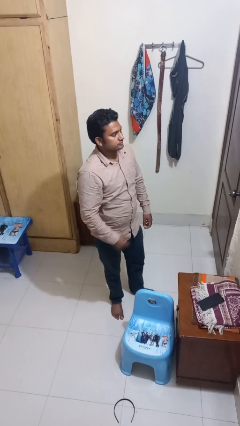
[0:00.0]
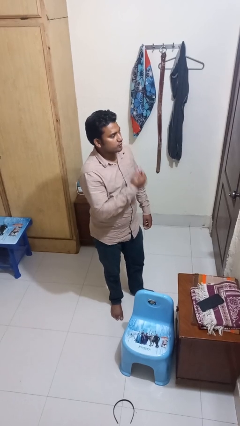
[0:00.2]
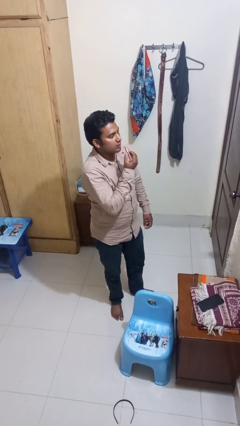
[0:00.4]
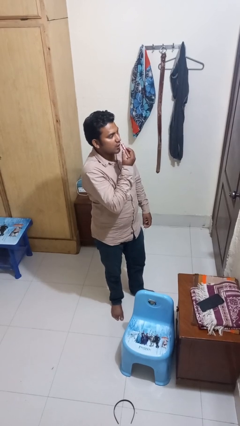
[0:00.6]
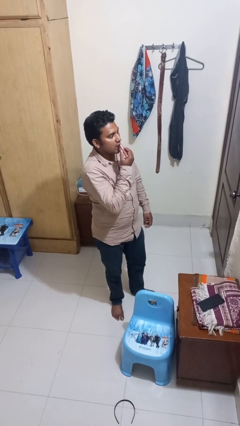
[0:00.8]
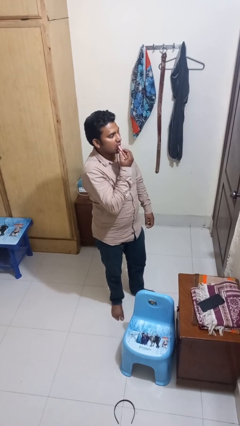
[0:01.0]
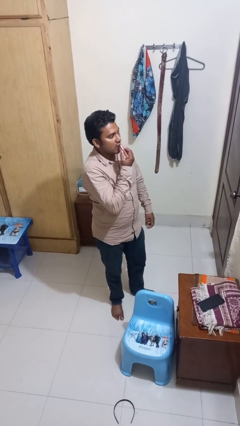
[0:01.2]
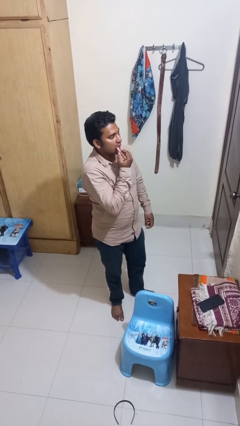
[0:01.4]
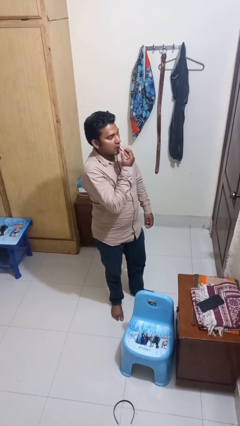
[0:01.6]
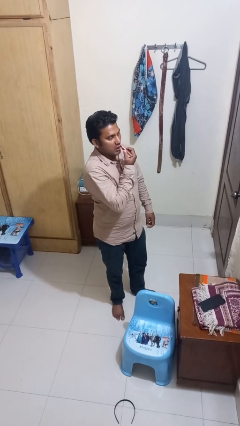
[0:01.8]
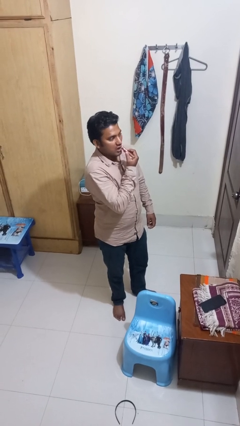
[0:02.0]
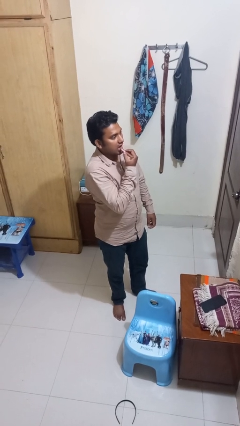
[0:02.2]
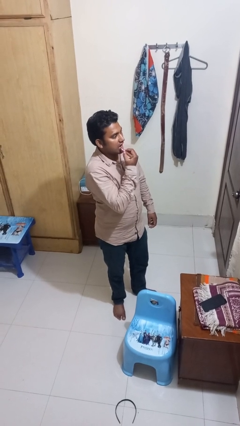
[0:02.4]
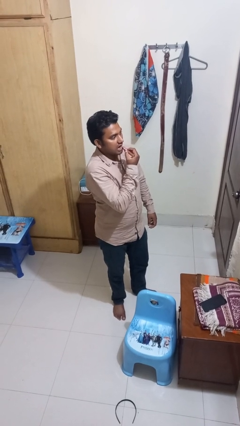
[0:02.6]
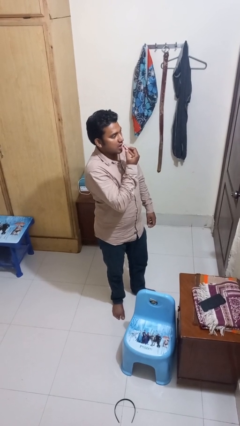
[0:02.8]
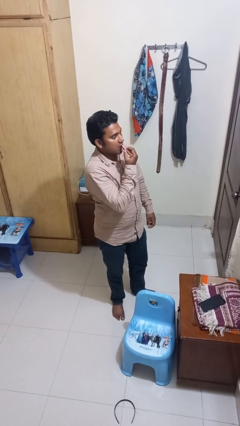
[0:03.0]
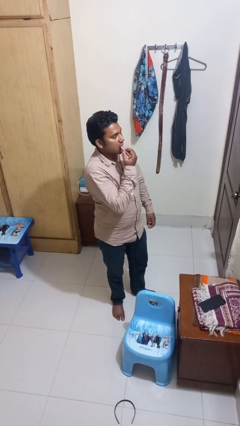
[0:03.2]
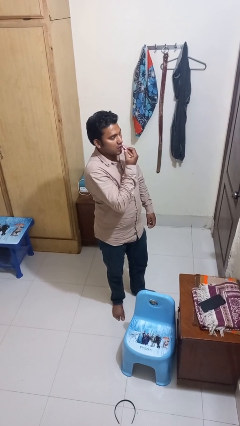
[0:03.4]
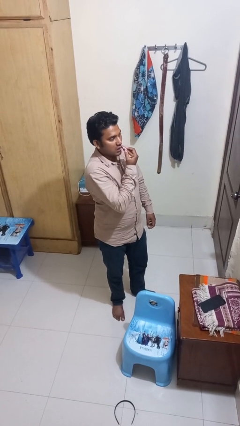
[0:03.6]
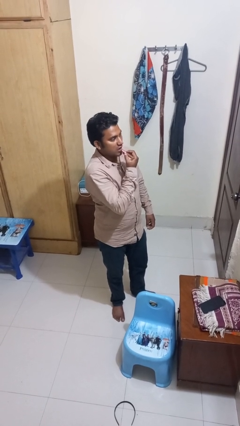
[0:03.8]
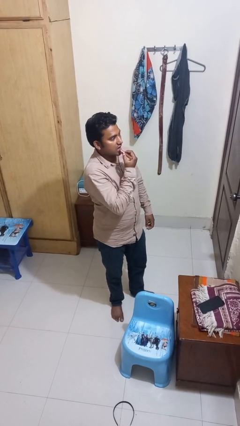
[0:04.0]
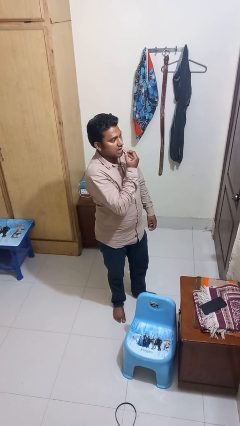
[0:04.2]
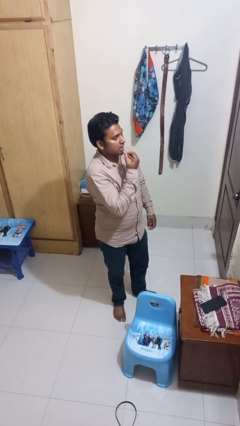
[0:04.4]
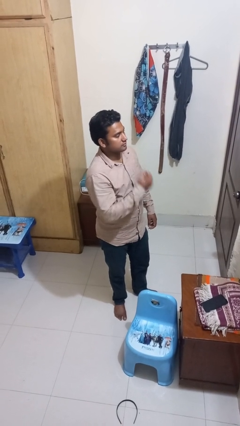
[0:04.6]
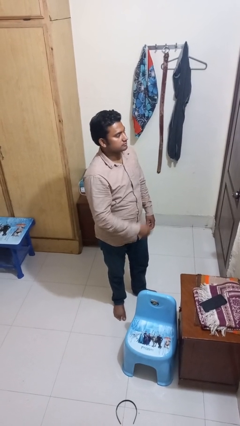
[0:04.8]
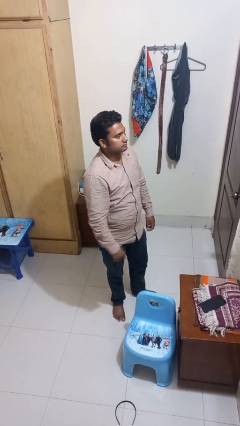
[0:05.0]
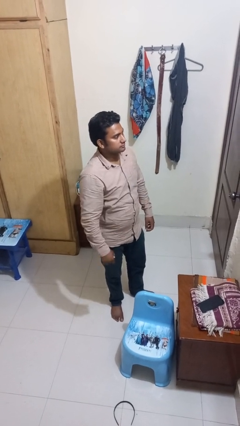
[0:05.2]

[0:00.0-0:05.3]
person applies lip makeup

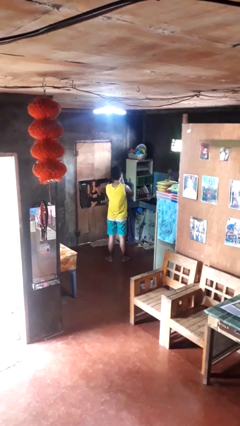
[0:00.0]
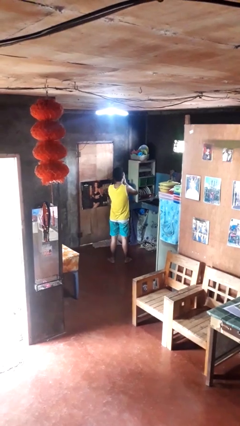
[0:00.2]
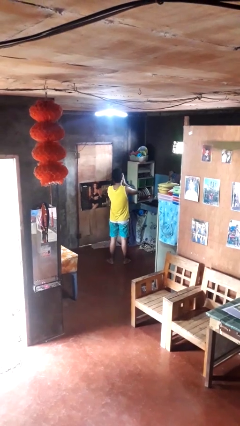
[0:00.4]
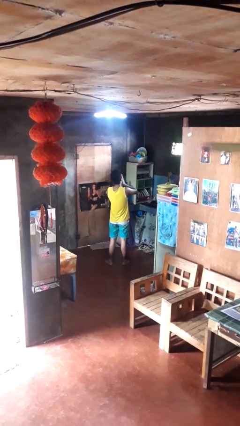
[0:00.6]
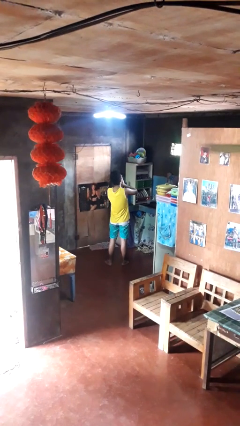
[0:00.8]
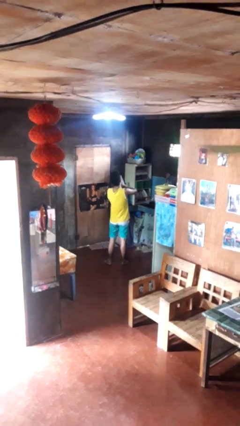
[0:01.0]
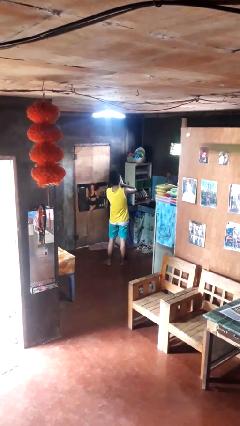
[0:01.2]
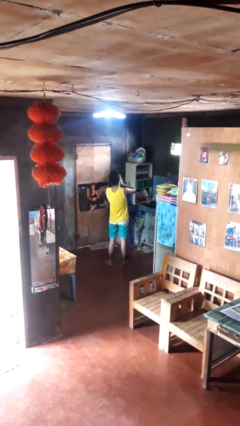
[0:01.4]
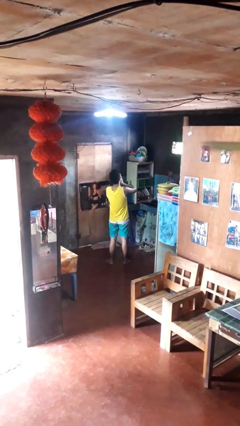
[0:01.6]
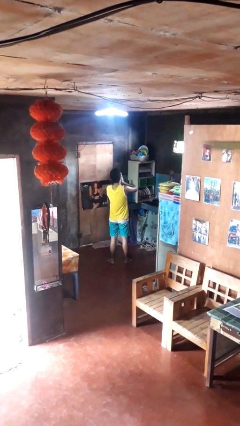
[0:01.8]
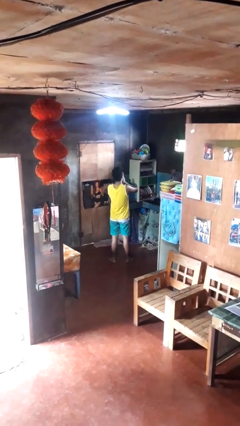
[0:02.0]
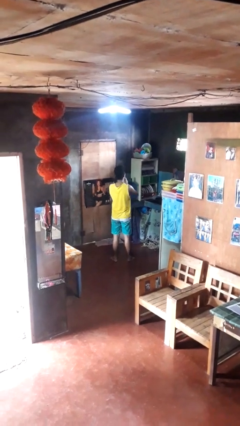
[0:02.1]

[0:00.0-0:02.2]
person yawns

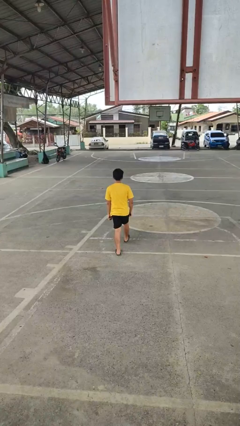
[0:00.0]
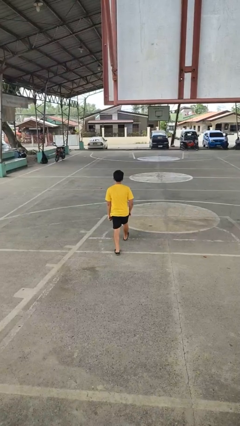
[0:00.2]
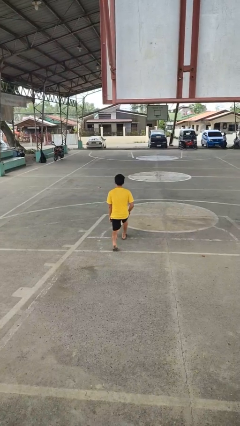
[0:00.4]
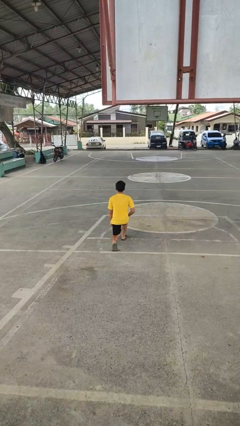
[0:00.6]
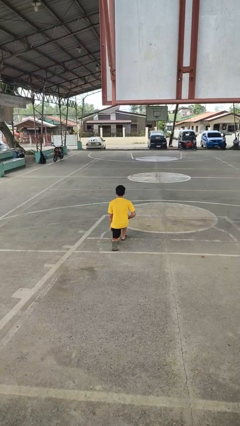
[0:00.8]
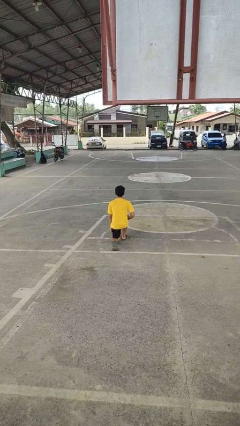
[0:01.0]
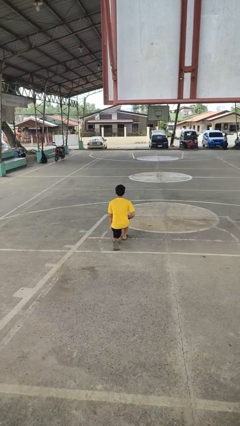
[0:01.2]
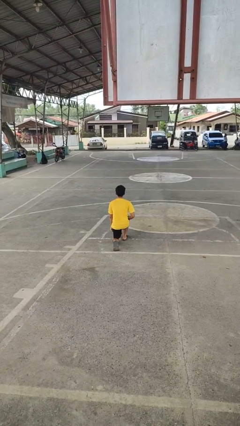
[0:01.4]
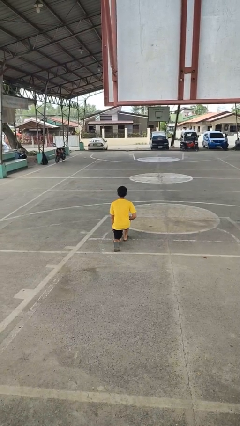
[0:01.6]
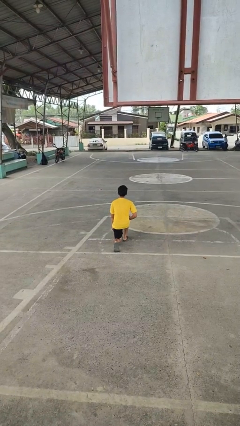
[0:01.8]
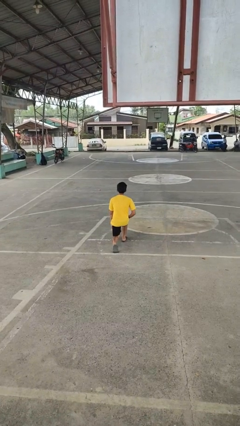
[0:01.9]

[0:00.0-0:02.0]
person kneels

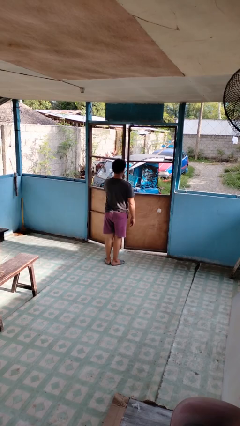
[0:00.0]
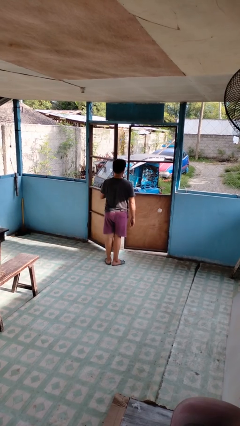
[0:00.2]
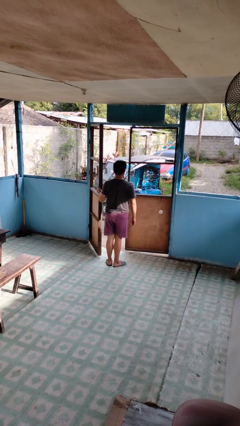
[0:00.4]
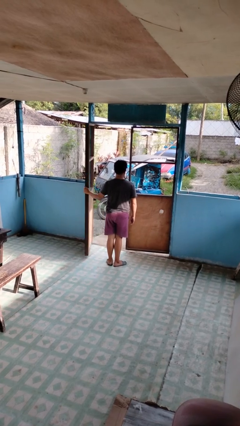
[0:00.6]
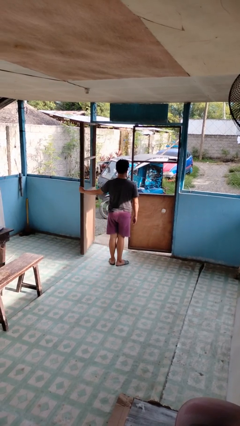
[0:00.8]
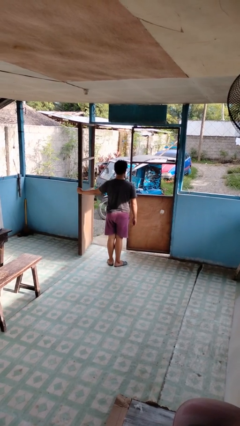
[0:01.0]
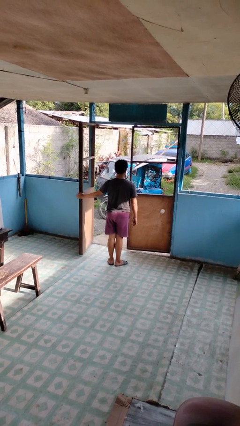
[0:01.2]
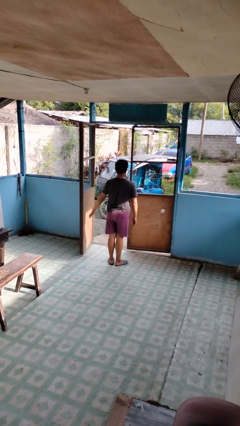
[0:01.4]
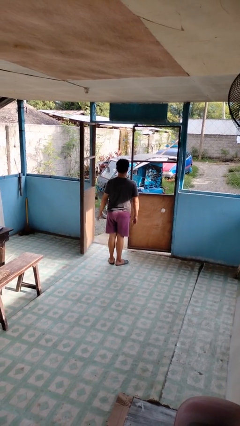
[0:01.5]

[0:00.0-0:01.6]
person opens facility door

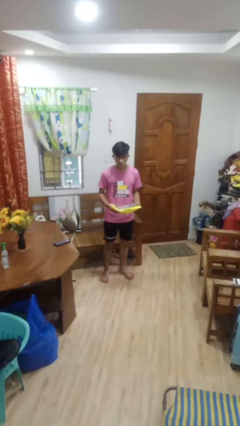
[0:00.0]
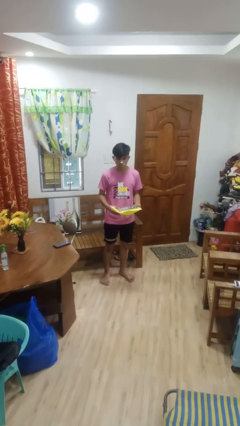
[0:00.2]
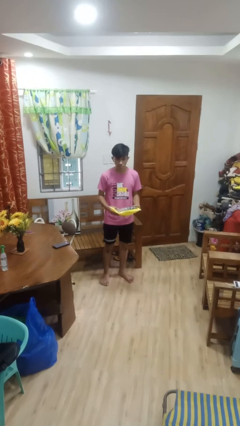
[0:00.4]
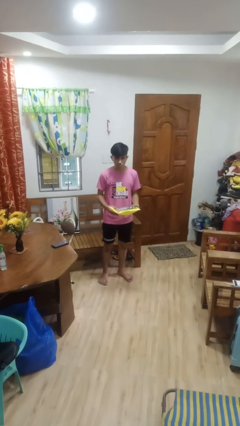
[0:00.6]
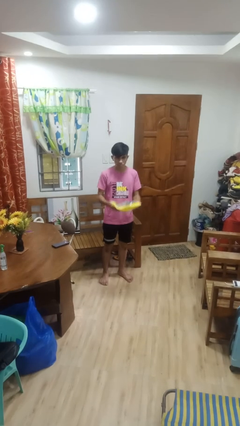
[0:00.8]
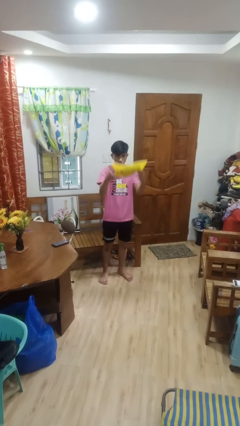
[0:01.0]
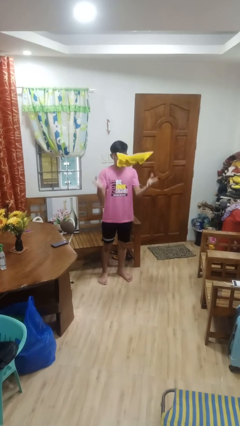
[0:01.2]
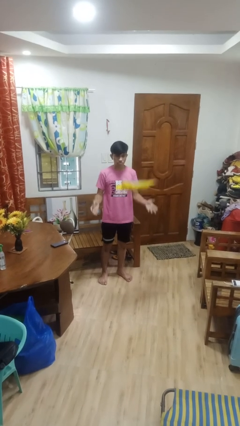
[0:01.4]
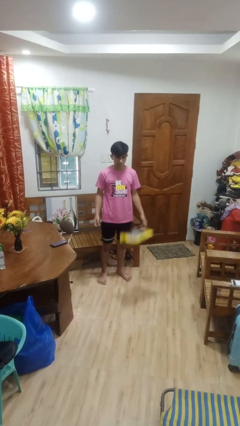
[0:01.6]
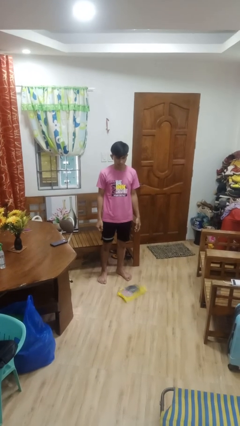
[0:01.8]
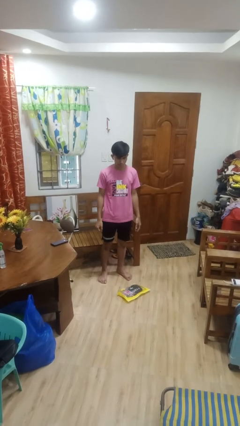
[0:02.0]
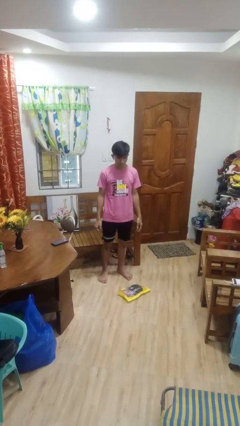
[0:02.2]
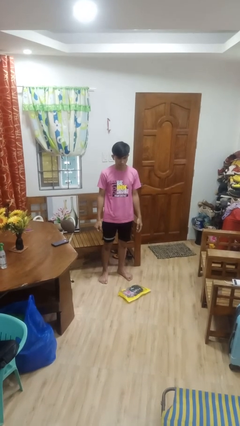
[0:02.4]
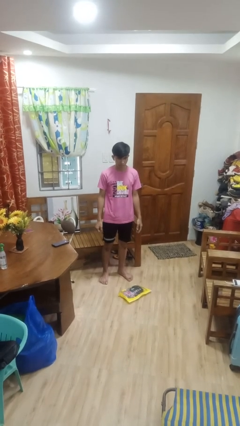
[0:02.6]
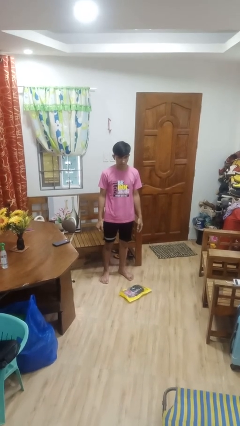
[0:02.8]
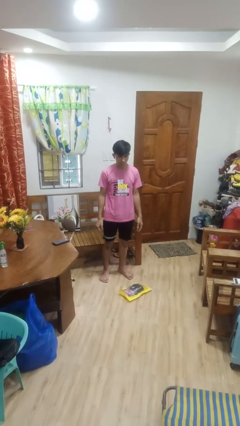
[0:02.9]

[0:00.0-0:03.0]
person throws object into air

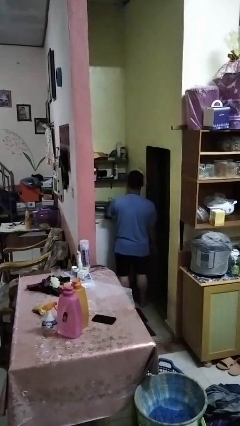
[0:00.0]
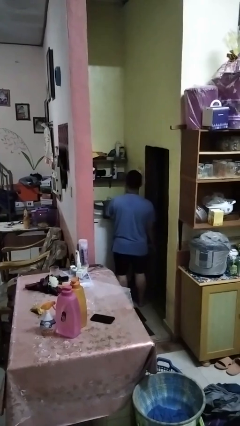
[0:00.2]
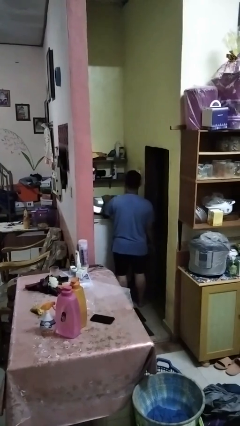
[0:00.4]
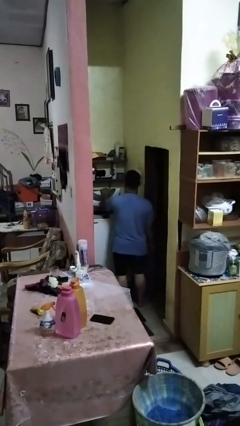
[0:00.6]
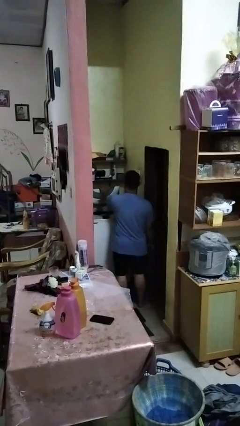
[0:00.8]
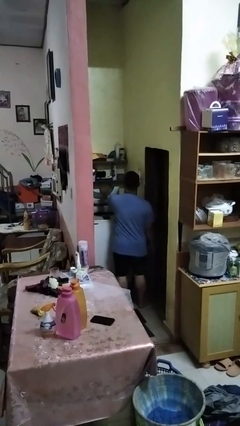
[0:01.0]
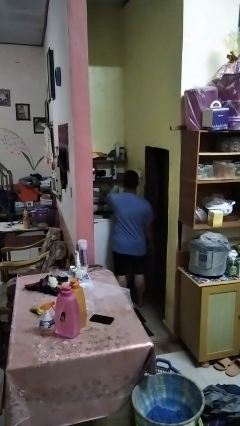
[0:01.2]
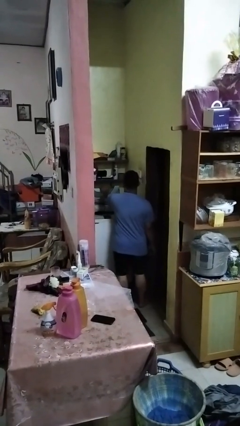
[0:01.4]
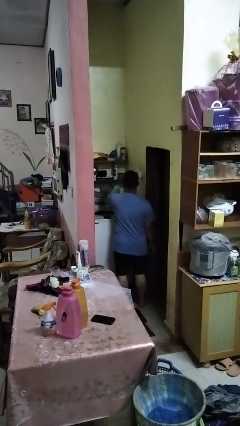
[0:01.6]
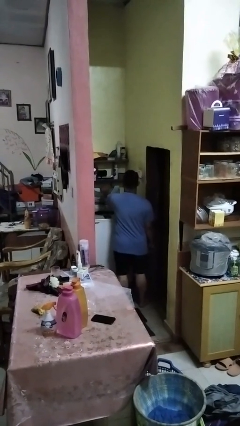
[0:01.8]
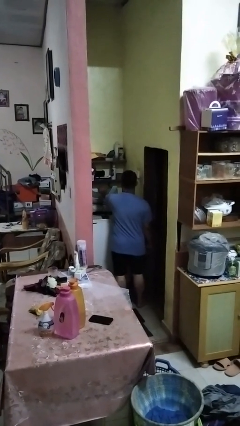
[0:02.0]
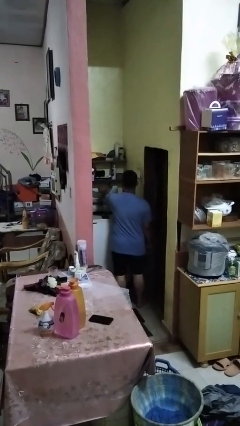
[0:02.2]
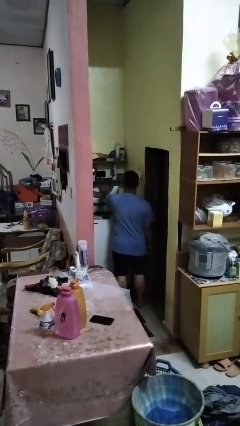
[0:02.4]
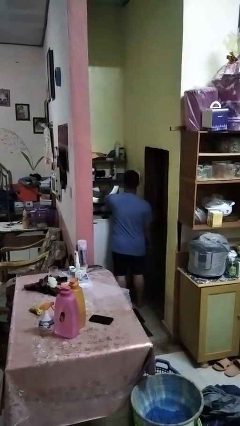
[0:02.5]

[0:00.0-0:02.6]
person opens clothes washer

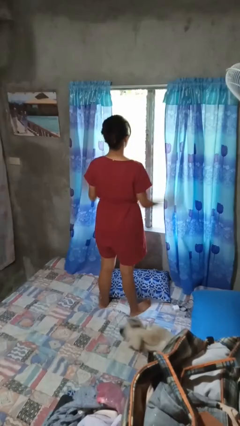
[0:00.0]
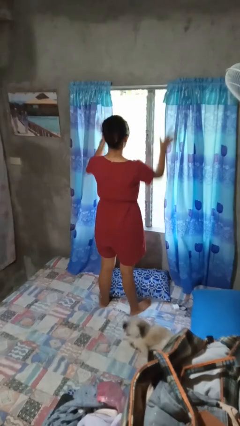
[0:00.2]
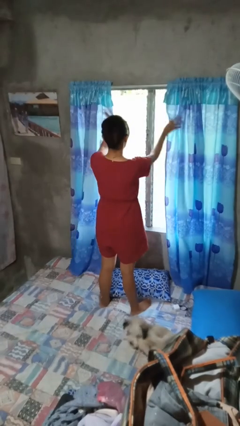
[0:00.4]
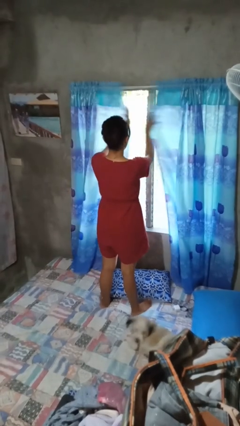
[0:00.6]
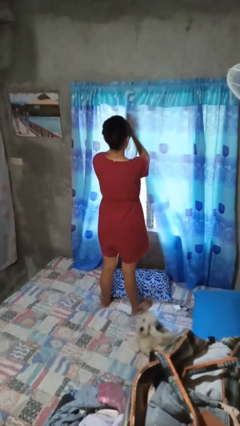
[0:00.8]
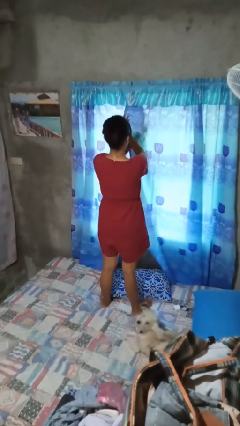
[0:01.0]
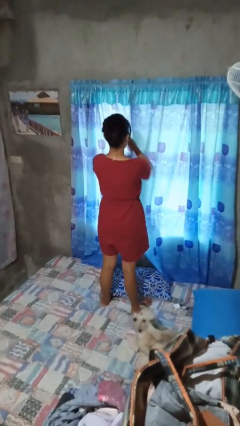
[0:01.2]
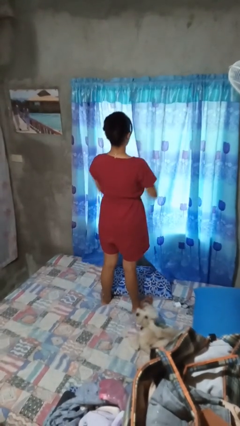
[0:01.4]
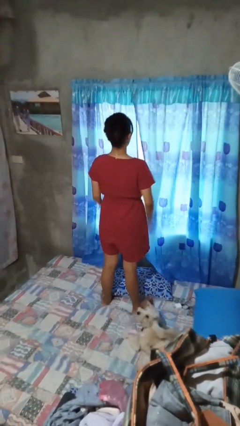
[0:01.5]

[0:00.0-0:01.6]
person closes curtains
